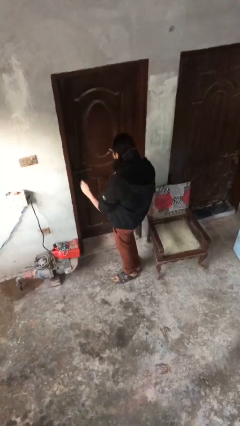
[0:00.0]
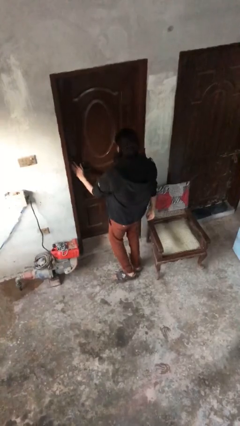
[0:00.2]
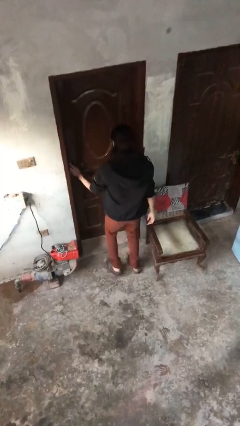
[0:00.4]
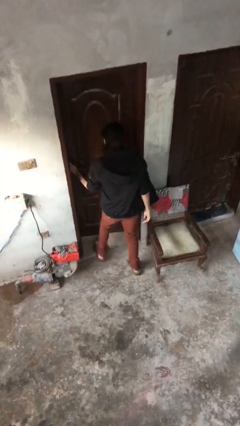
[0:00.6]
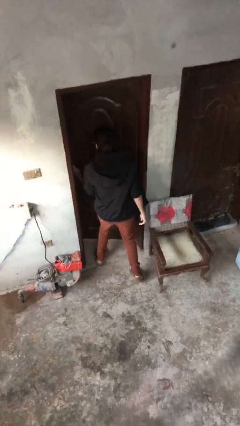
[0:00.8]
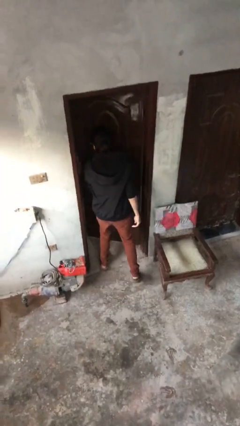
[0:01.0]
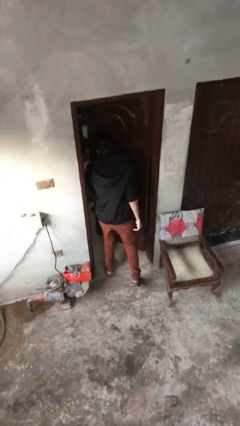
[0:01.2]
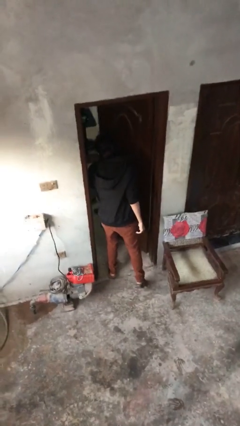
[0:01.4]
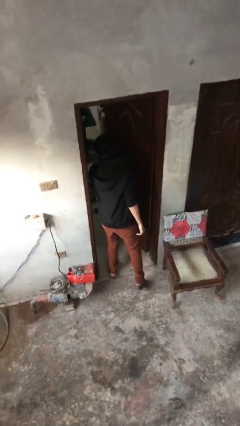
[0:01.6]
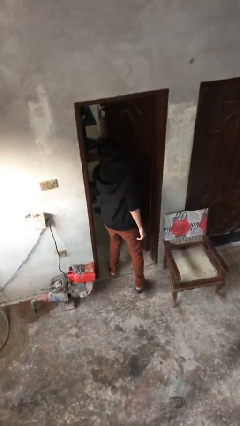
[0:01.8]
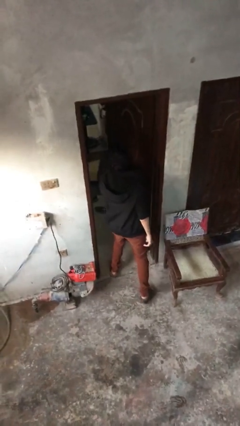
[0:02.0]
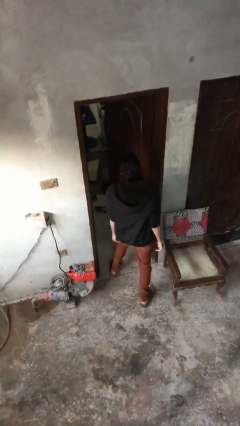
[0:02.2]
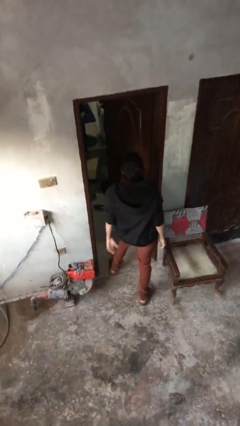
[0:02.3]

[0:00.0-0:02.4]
person opens facility door

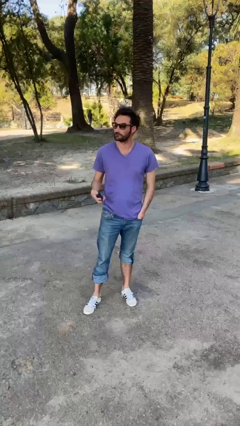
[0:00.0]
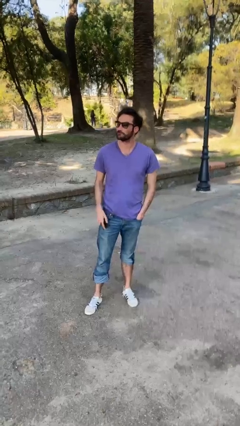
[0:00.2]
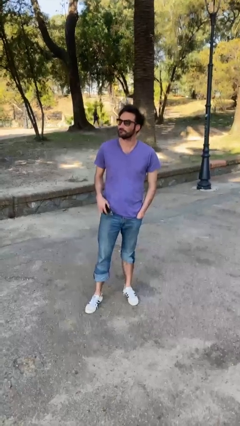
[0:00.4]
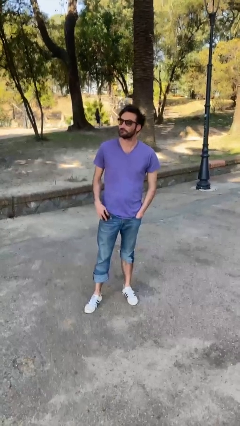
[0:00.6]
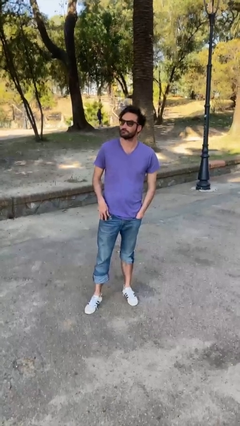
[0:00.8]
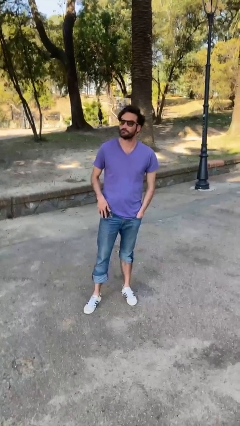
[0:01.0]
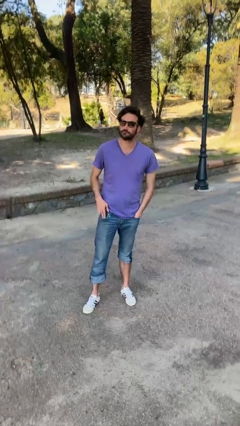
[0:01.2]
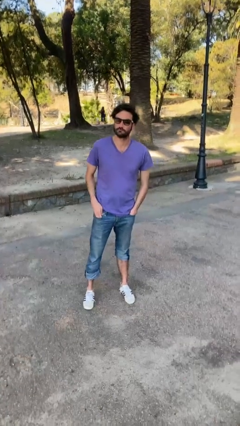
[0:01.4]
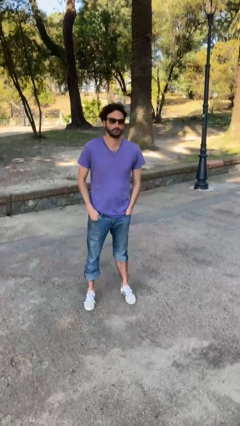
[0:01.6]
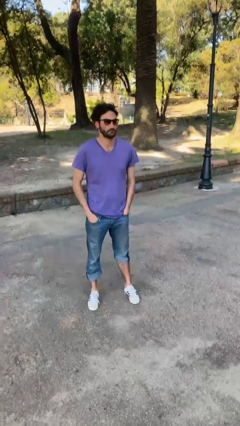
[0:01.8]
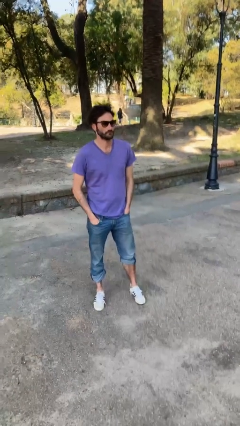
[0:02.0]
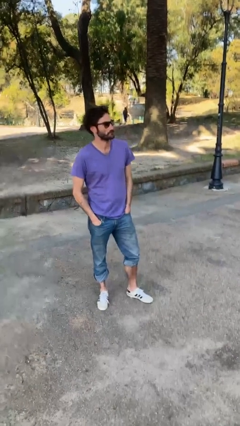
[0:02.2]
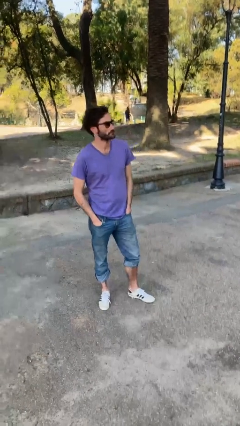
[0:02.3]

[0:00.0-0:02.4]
person puts phone into pocket

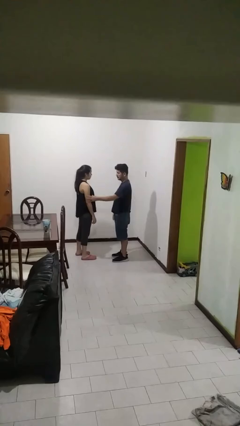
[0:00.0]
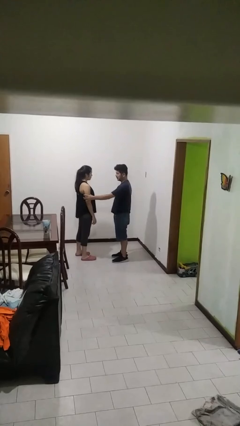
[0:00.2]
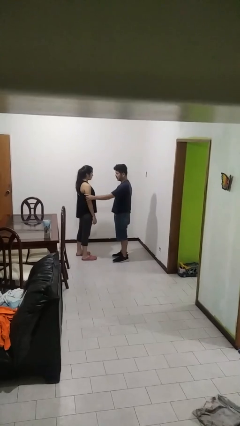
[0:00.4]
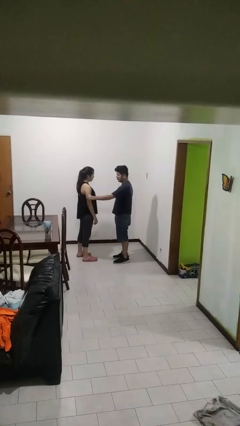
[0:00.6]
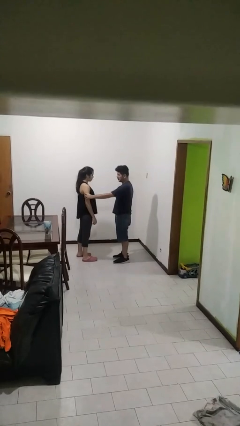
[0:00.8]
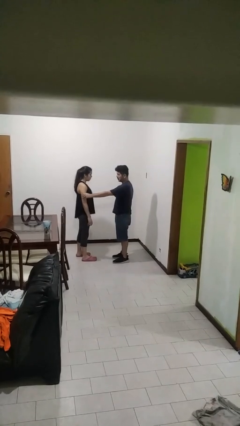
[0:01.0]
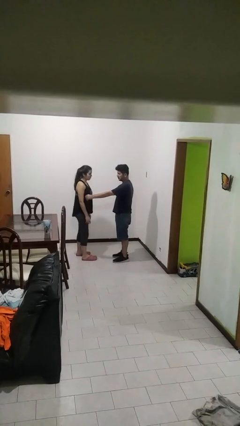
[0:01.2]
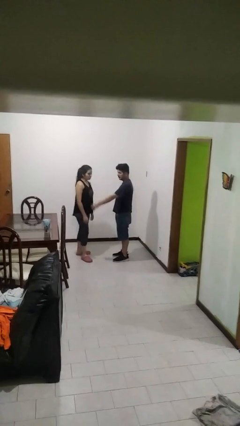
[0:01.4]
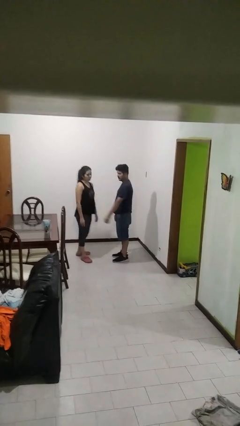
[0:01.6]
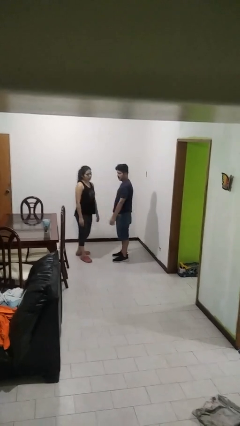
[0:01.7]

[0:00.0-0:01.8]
person grabs person by bicep

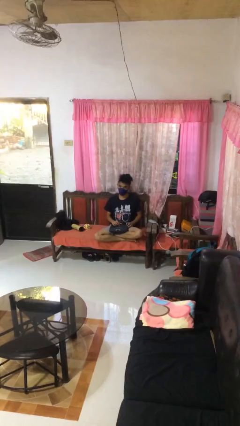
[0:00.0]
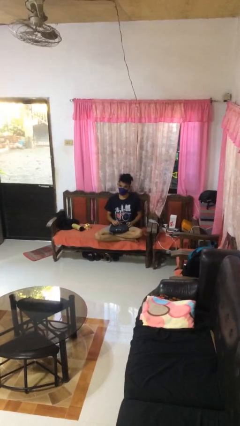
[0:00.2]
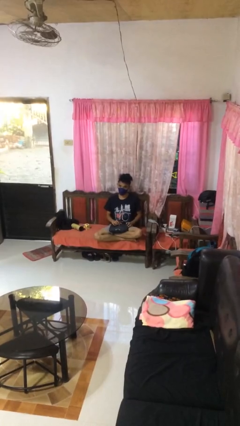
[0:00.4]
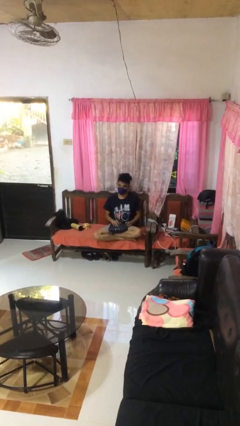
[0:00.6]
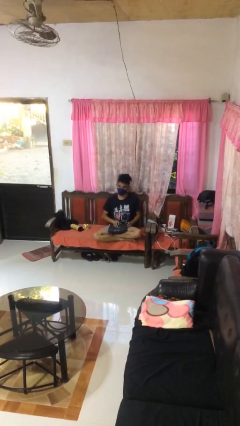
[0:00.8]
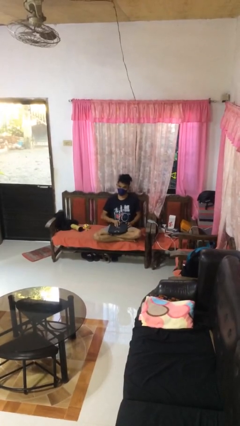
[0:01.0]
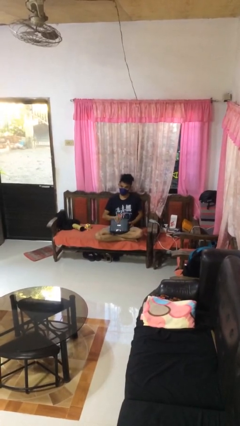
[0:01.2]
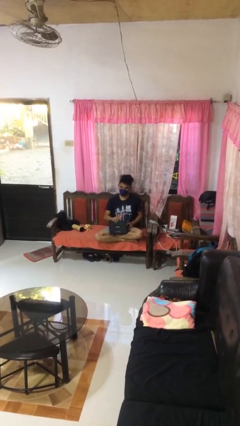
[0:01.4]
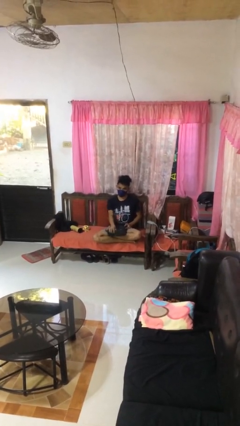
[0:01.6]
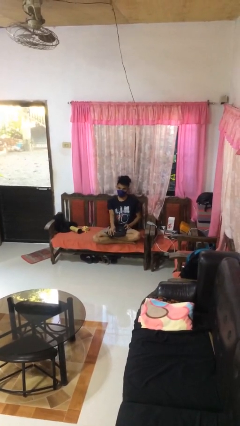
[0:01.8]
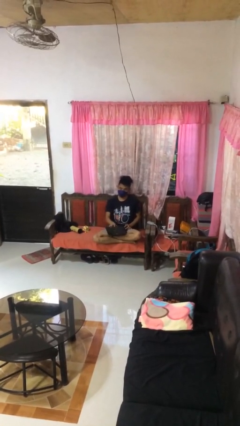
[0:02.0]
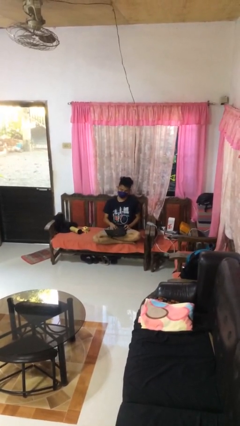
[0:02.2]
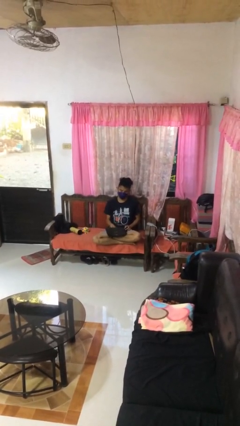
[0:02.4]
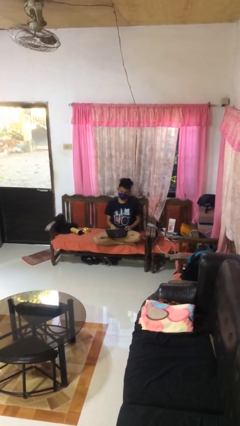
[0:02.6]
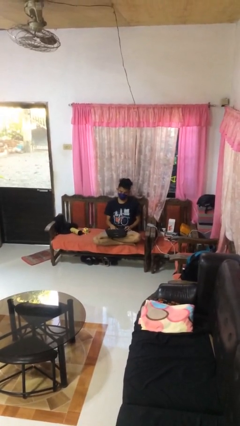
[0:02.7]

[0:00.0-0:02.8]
person opens laptop

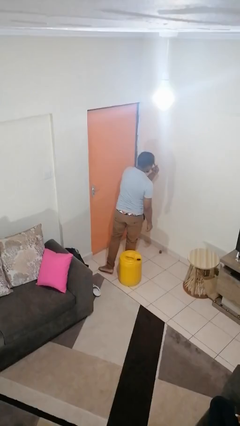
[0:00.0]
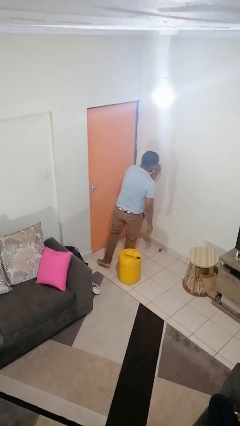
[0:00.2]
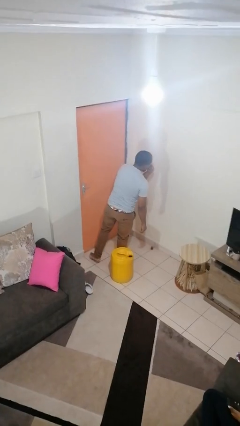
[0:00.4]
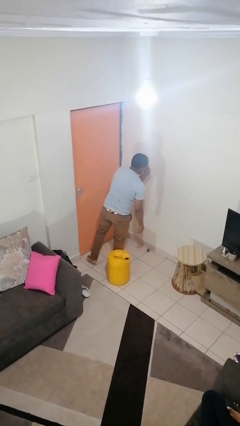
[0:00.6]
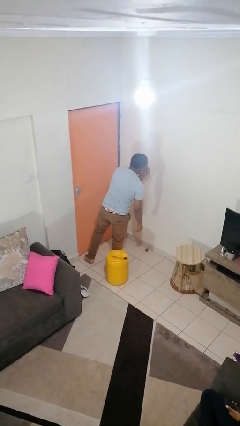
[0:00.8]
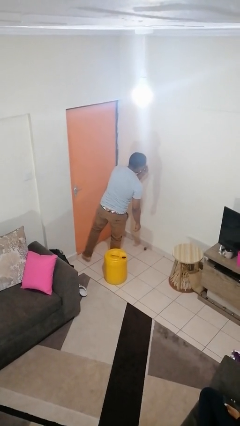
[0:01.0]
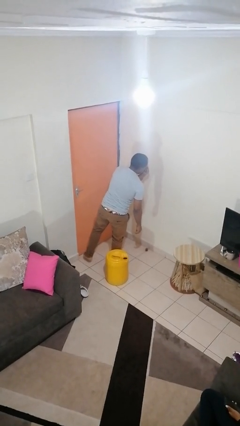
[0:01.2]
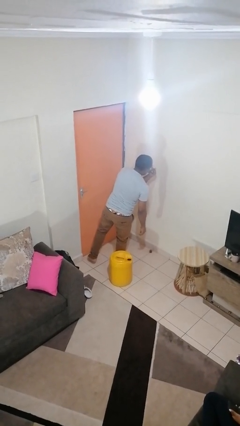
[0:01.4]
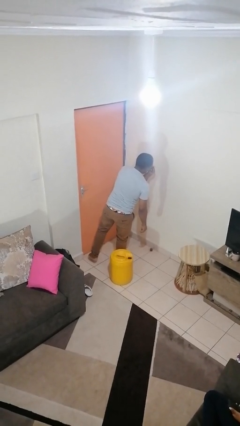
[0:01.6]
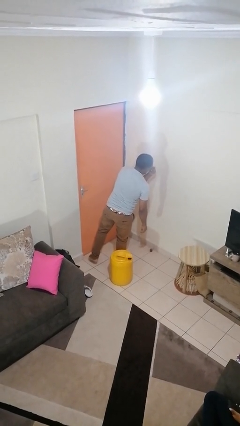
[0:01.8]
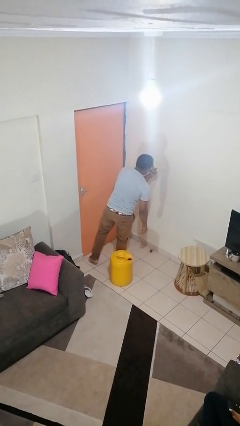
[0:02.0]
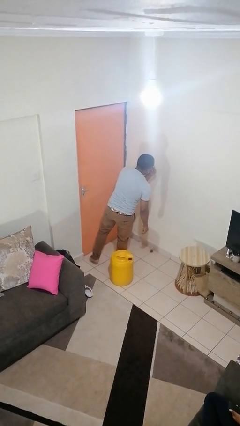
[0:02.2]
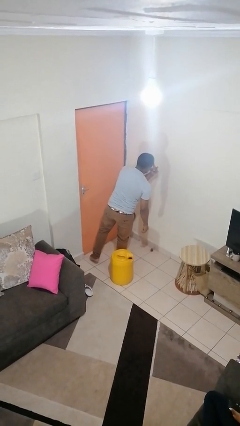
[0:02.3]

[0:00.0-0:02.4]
person gestures watch closely

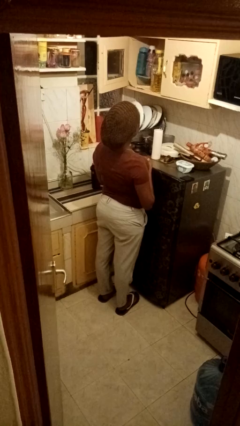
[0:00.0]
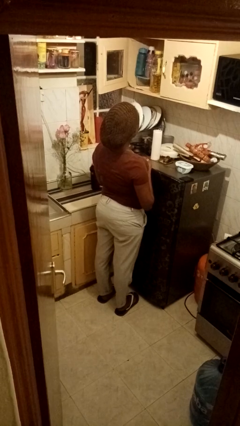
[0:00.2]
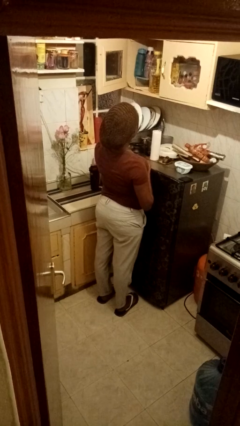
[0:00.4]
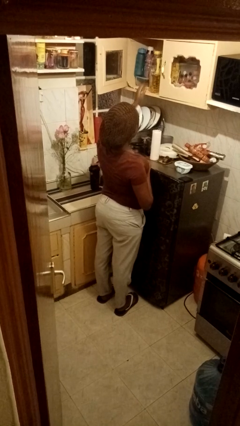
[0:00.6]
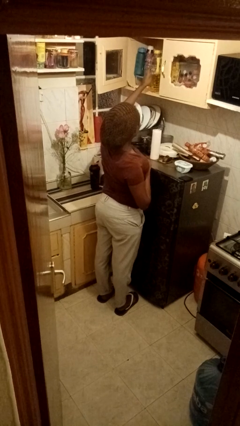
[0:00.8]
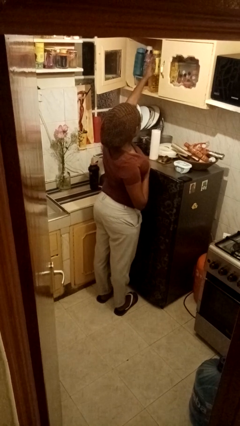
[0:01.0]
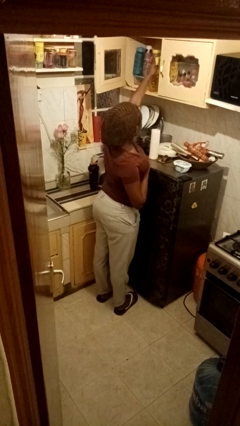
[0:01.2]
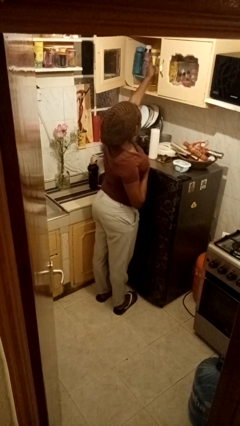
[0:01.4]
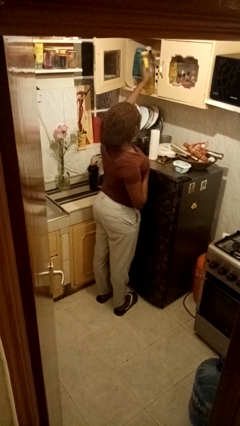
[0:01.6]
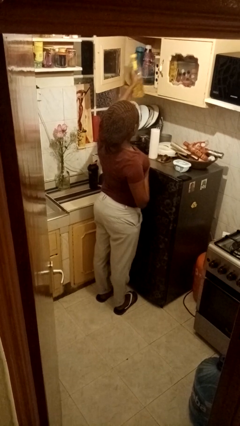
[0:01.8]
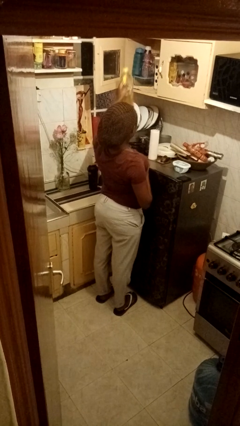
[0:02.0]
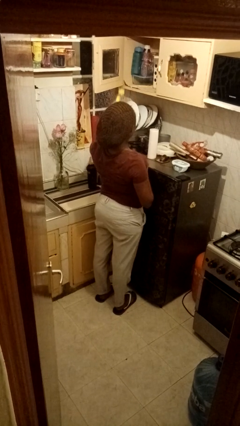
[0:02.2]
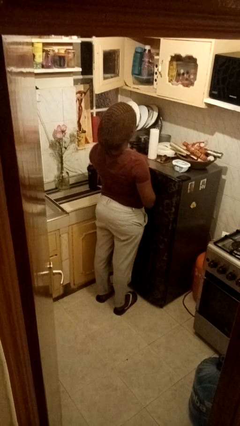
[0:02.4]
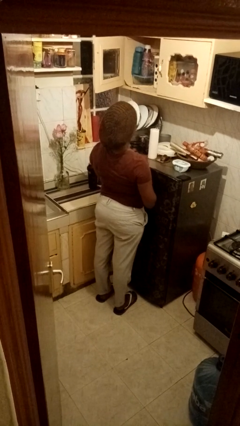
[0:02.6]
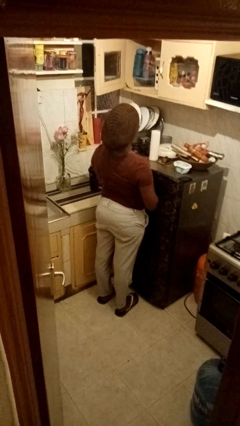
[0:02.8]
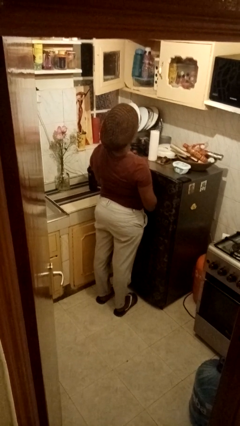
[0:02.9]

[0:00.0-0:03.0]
person picks up object from shelf

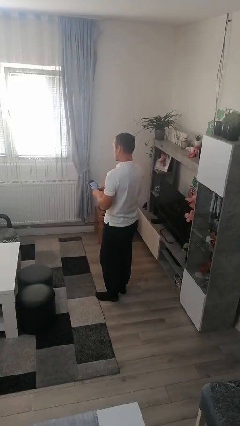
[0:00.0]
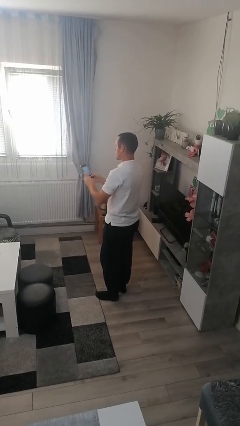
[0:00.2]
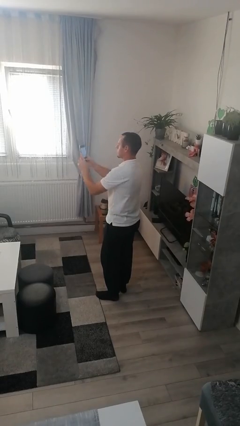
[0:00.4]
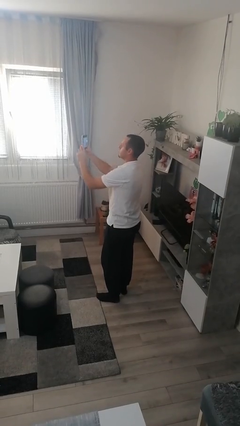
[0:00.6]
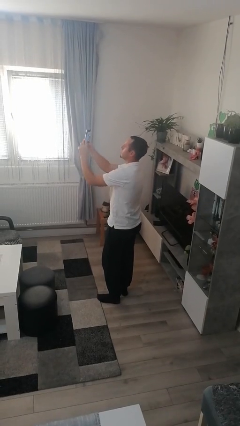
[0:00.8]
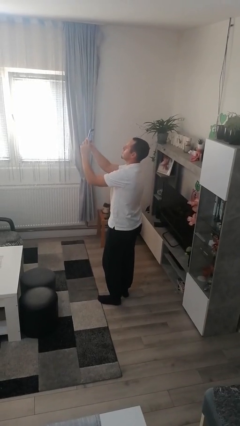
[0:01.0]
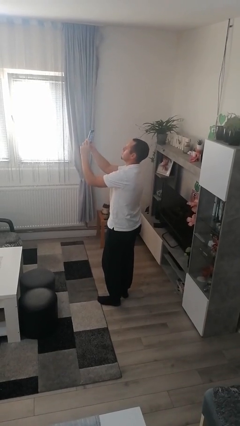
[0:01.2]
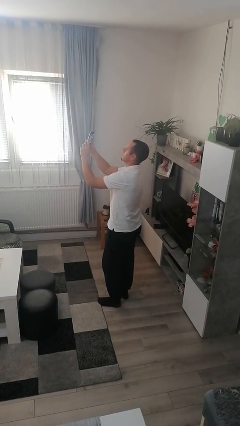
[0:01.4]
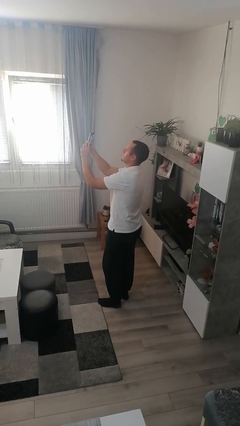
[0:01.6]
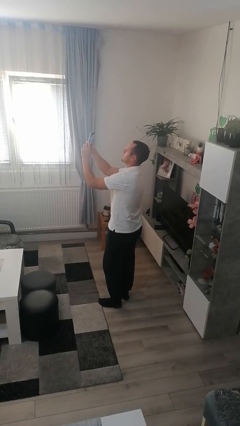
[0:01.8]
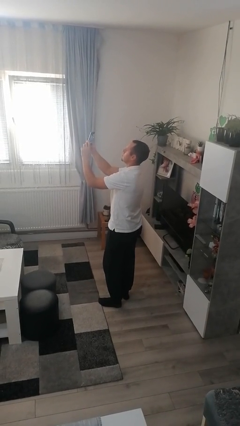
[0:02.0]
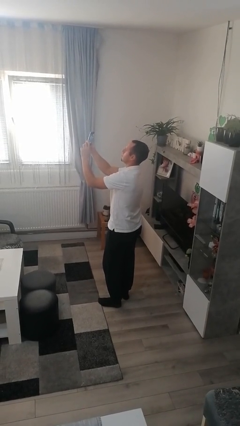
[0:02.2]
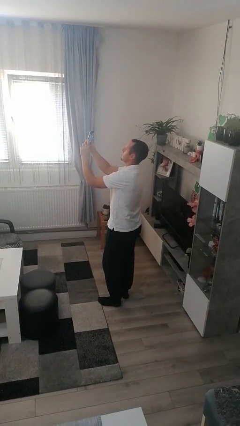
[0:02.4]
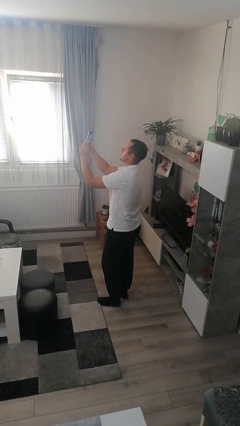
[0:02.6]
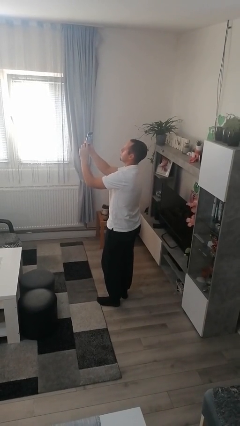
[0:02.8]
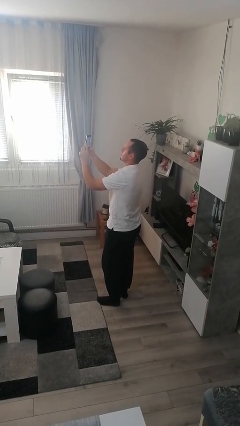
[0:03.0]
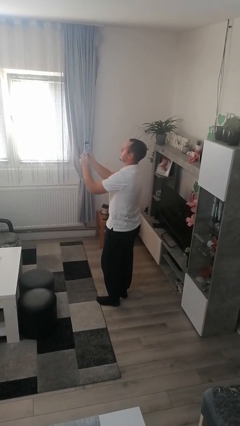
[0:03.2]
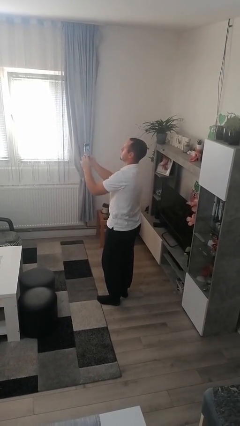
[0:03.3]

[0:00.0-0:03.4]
person takes selfie
